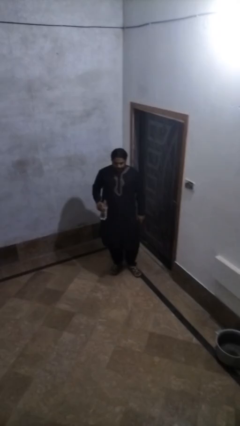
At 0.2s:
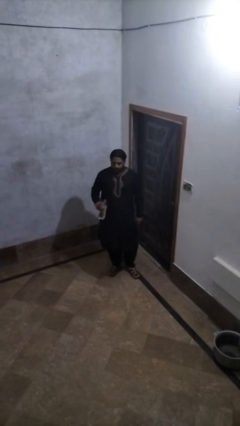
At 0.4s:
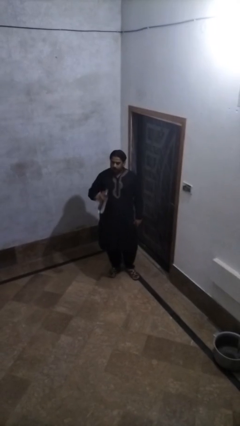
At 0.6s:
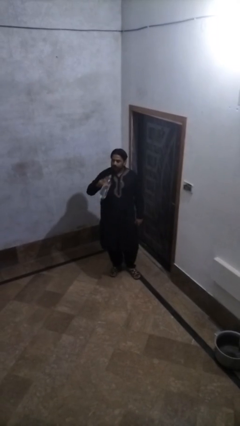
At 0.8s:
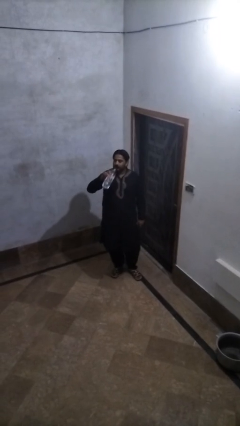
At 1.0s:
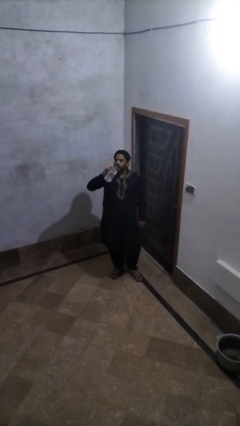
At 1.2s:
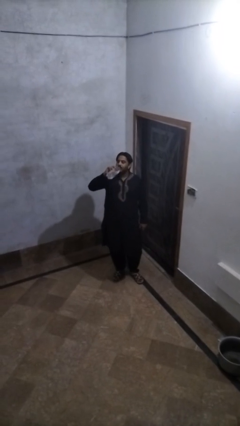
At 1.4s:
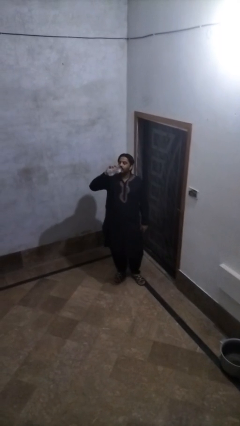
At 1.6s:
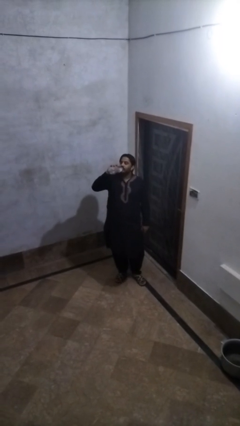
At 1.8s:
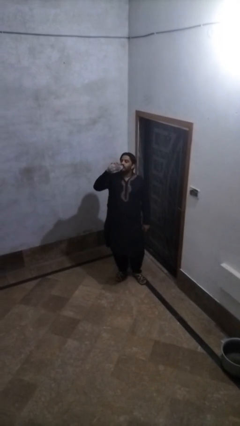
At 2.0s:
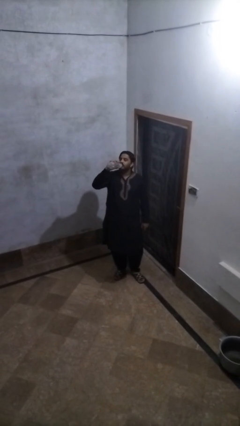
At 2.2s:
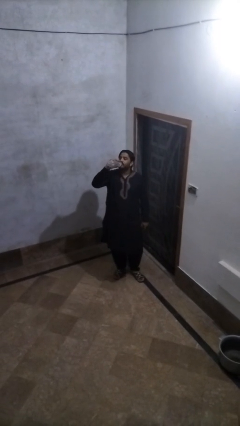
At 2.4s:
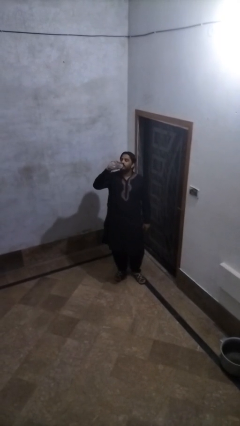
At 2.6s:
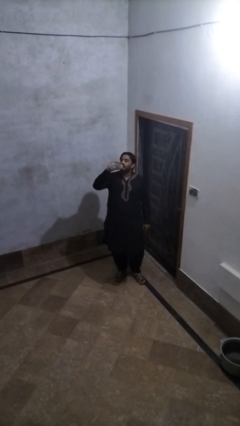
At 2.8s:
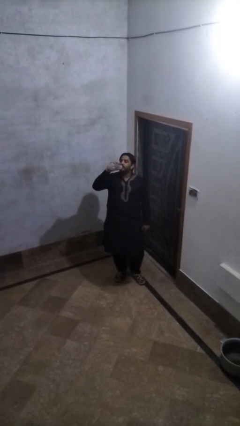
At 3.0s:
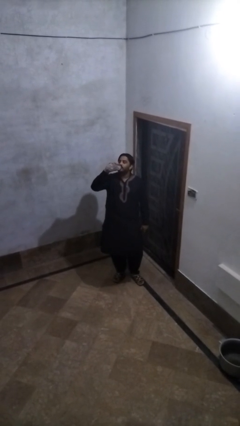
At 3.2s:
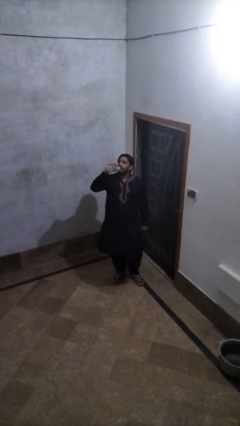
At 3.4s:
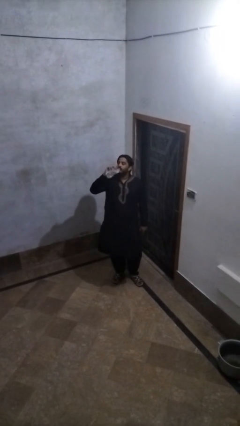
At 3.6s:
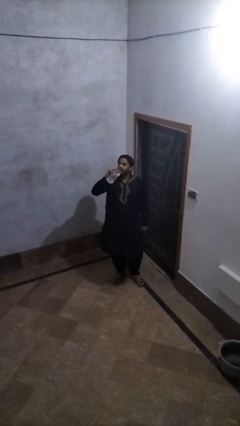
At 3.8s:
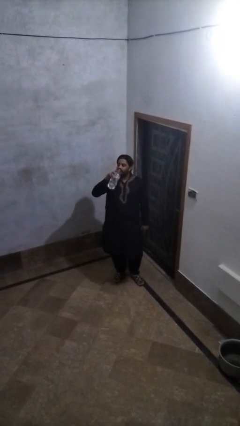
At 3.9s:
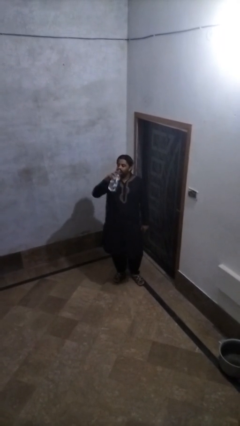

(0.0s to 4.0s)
person drinks from bottle

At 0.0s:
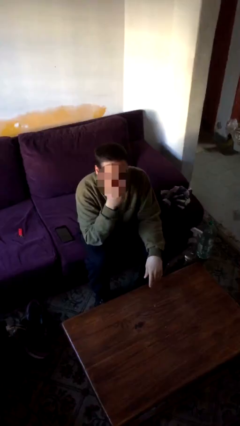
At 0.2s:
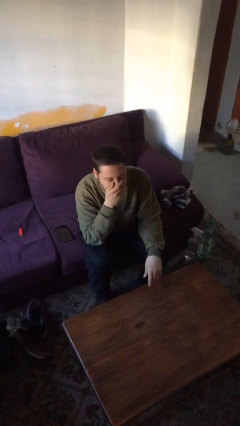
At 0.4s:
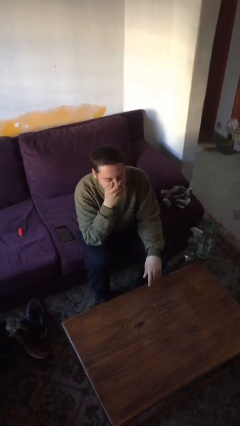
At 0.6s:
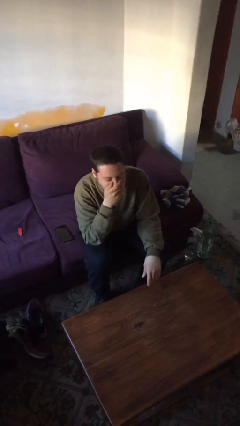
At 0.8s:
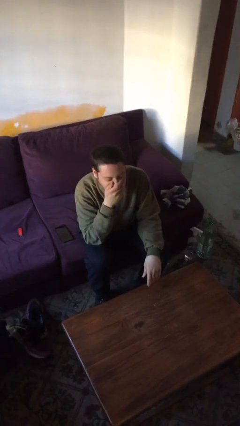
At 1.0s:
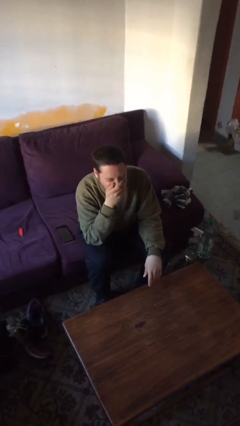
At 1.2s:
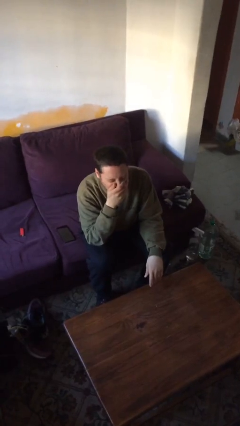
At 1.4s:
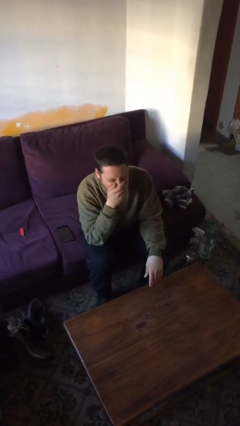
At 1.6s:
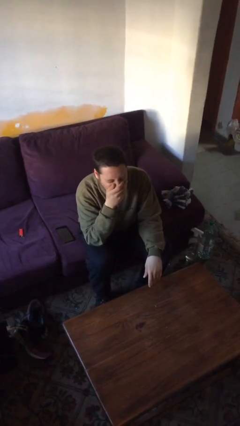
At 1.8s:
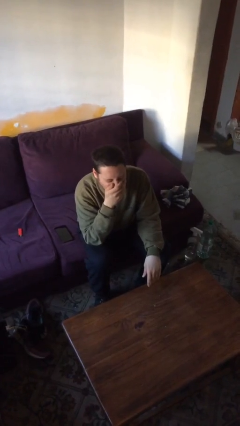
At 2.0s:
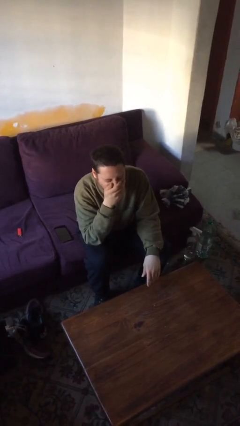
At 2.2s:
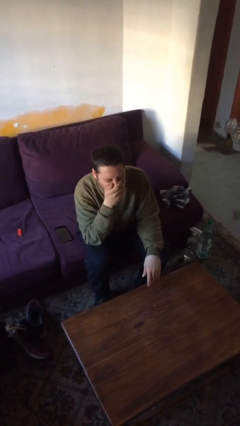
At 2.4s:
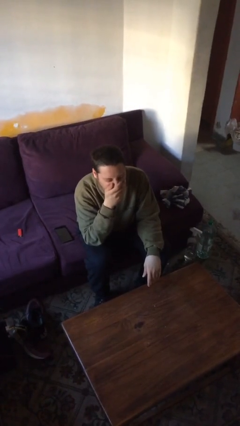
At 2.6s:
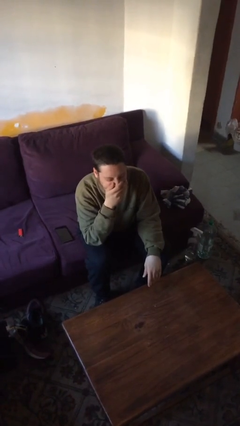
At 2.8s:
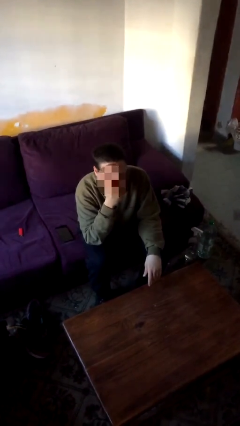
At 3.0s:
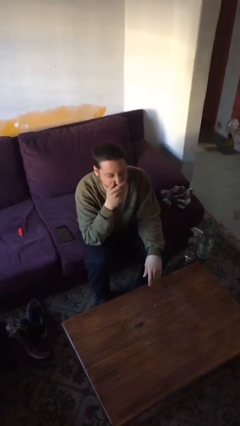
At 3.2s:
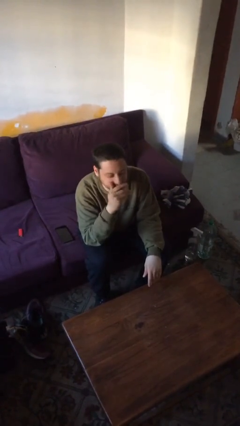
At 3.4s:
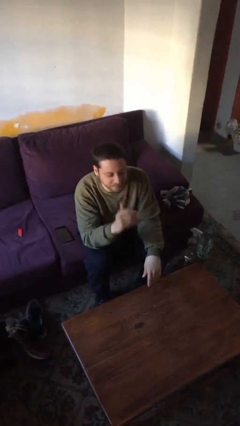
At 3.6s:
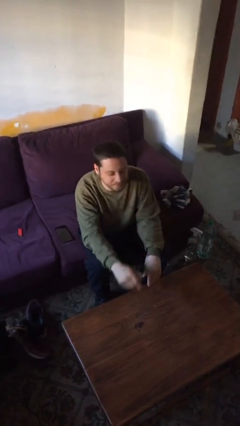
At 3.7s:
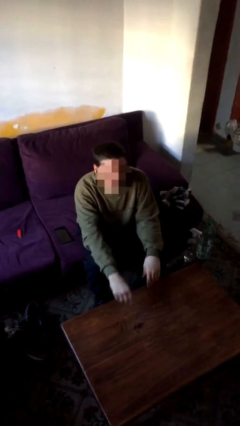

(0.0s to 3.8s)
person yawns

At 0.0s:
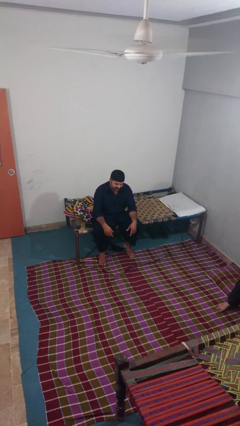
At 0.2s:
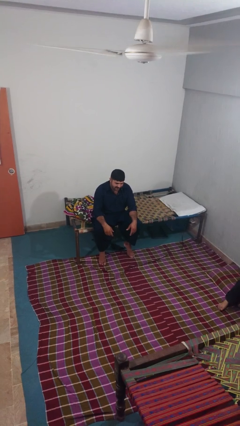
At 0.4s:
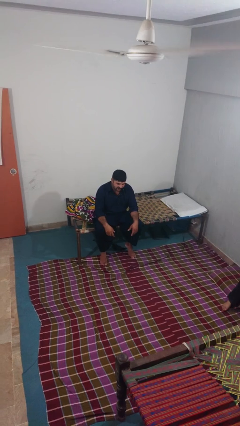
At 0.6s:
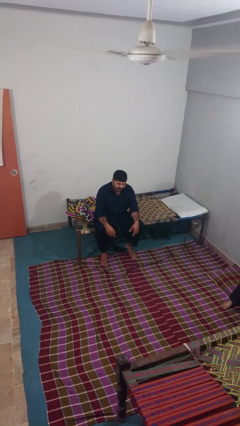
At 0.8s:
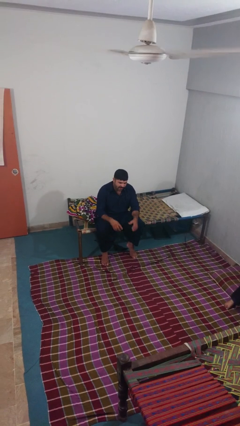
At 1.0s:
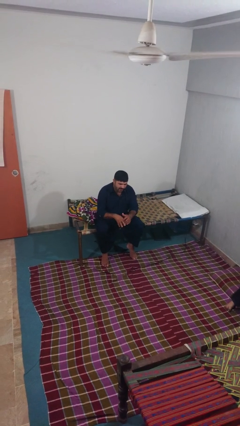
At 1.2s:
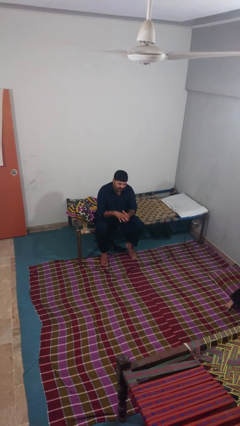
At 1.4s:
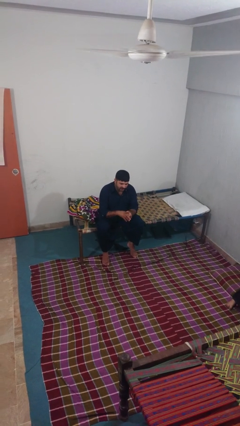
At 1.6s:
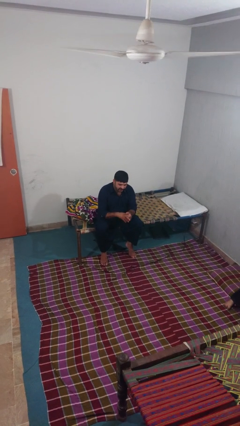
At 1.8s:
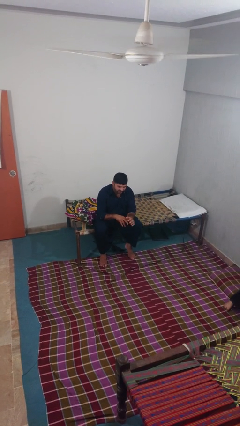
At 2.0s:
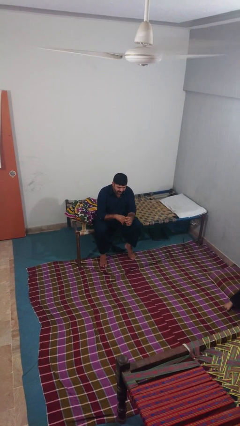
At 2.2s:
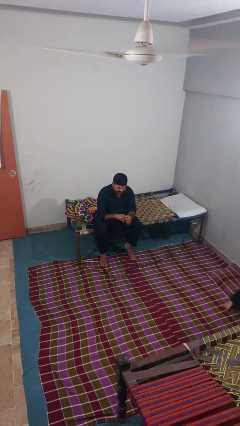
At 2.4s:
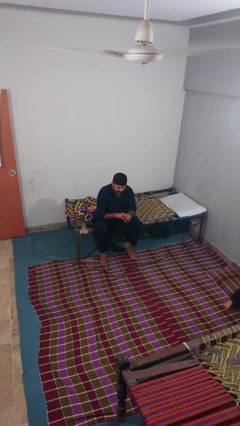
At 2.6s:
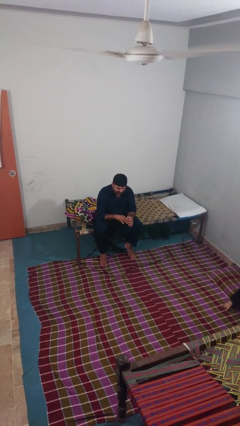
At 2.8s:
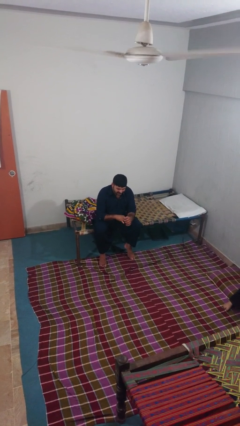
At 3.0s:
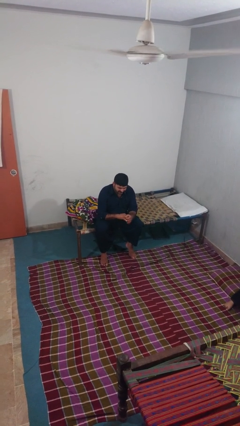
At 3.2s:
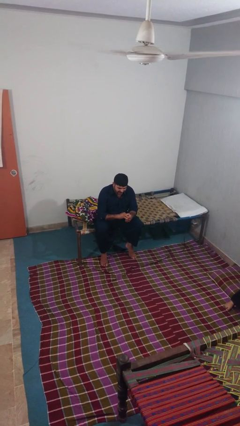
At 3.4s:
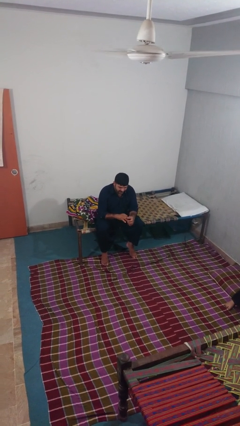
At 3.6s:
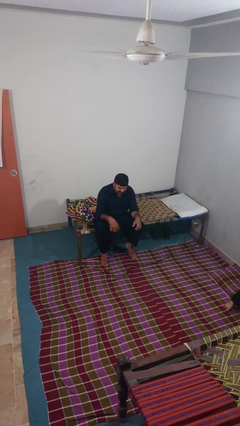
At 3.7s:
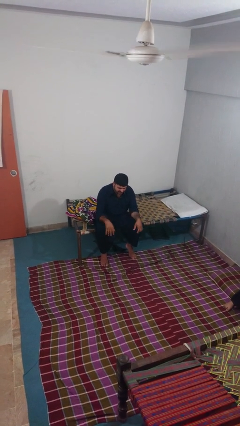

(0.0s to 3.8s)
person cracks knuckles

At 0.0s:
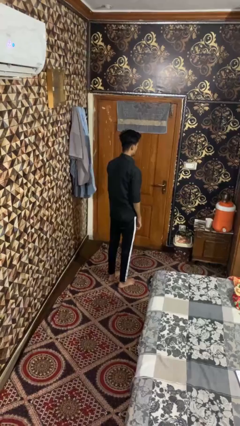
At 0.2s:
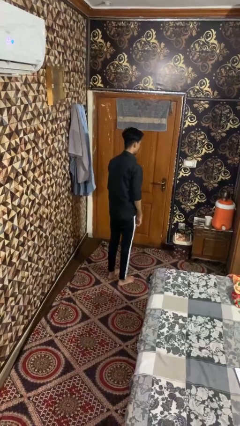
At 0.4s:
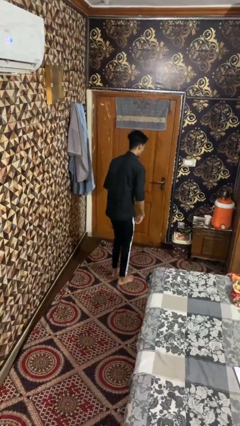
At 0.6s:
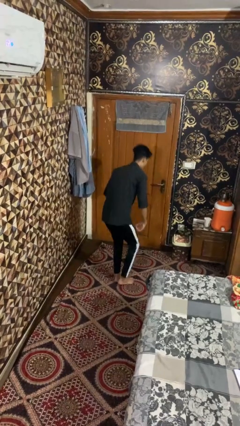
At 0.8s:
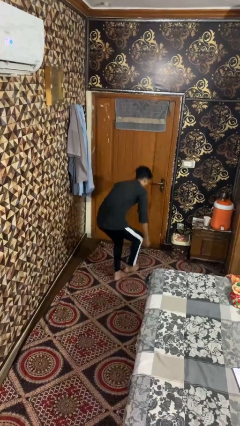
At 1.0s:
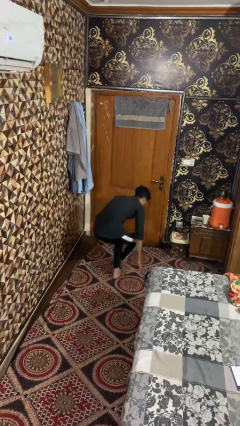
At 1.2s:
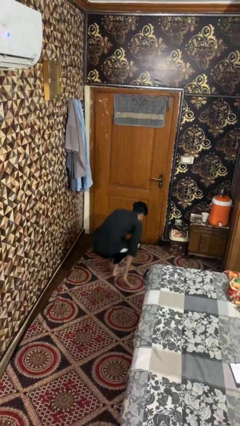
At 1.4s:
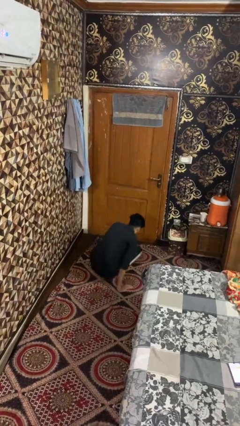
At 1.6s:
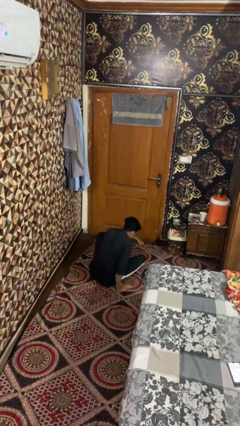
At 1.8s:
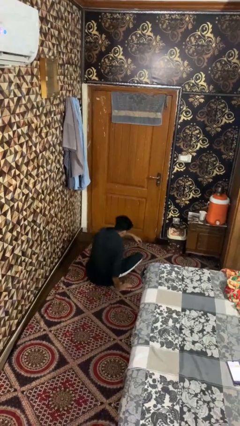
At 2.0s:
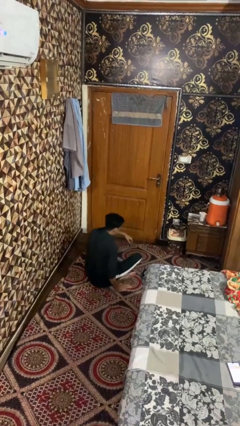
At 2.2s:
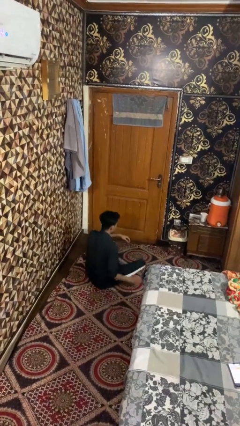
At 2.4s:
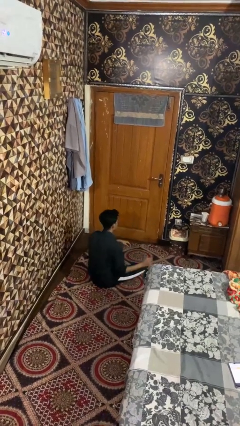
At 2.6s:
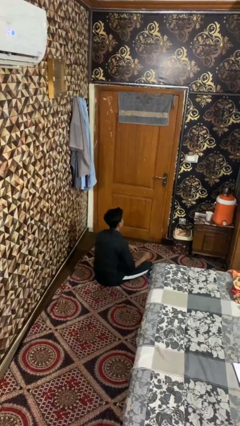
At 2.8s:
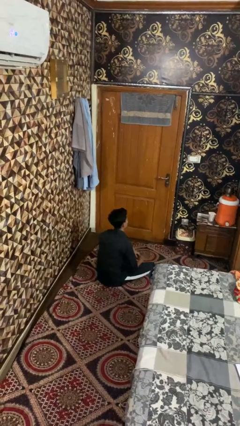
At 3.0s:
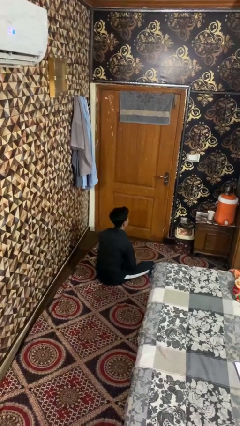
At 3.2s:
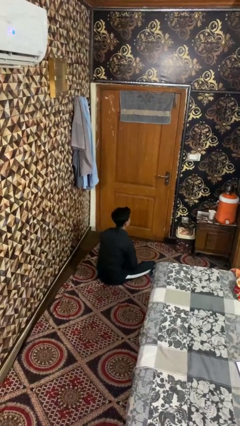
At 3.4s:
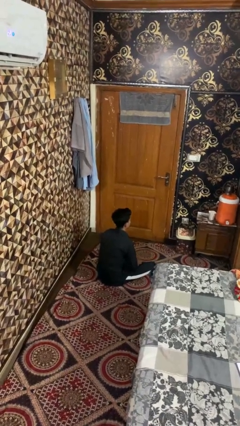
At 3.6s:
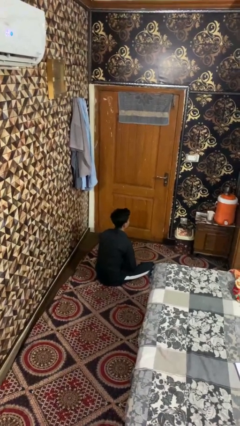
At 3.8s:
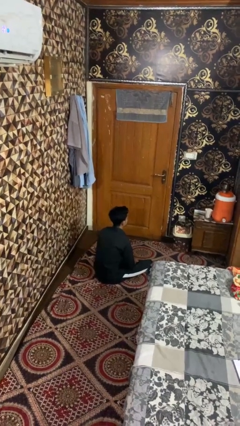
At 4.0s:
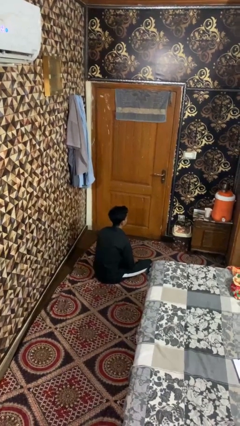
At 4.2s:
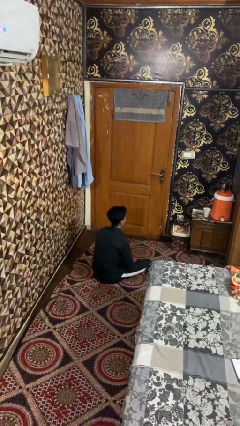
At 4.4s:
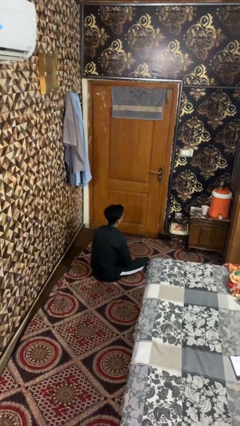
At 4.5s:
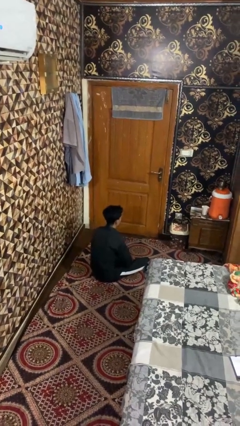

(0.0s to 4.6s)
person sits crisscross

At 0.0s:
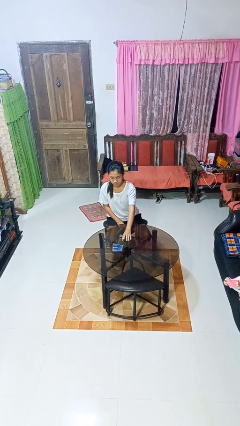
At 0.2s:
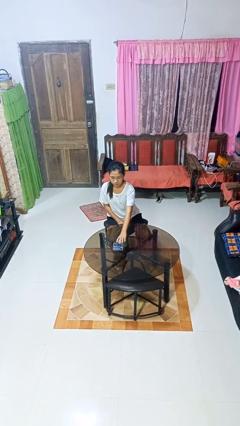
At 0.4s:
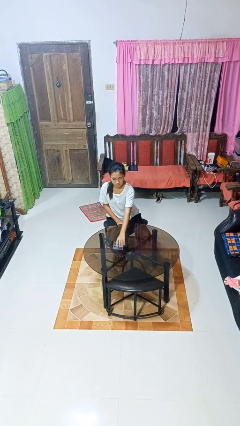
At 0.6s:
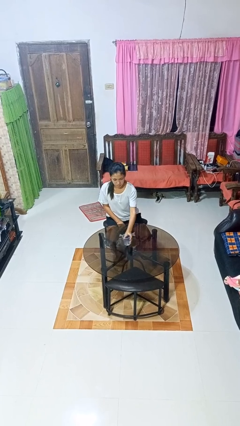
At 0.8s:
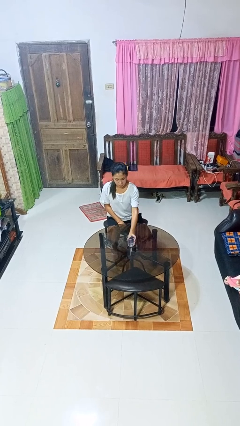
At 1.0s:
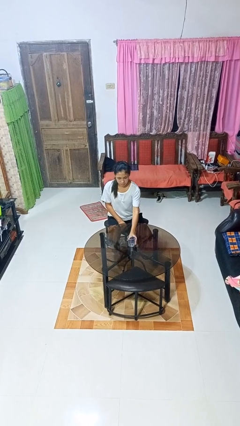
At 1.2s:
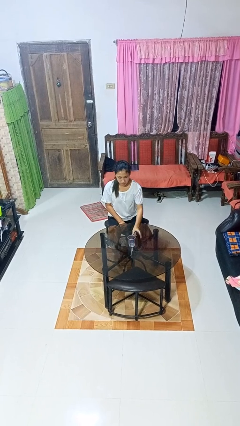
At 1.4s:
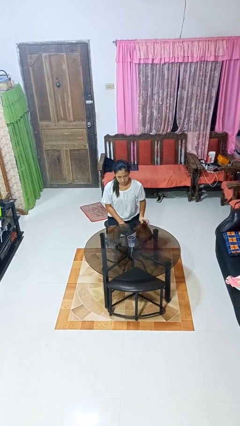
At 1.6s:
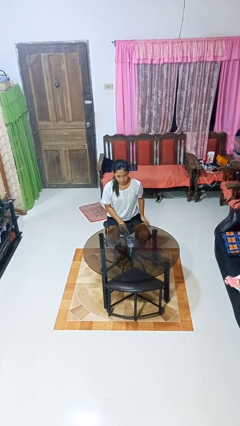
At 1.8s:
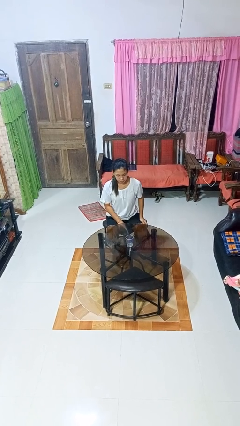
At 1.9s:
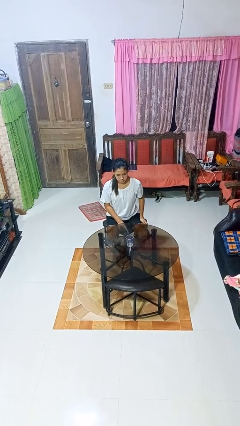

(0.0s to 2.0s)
person sets upright glass
